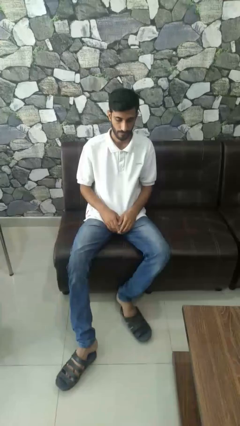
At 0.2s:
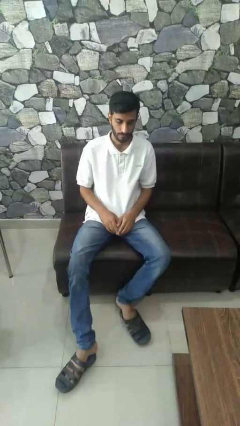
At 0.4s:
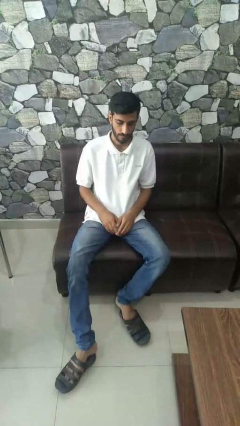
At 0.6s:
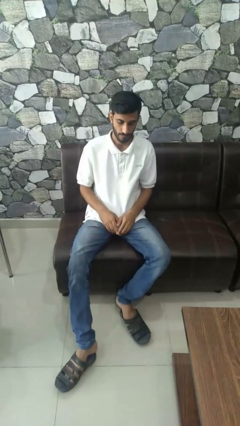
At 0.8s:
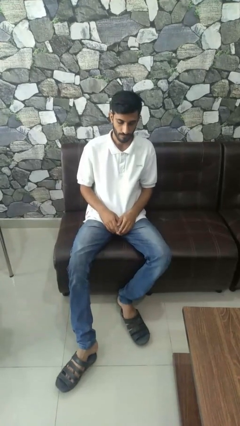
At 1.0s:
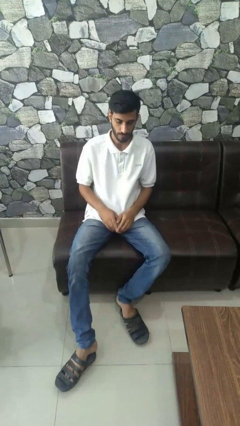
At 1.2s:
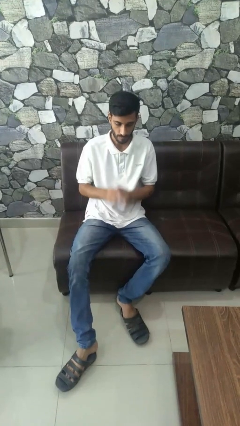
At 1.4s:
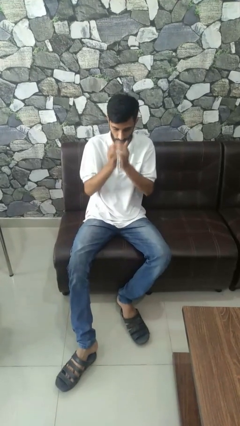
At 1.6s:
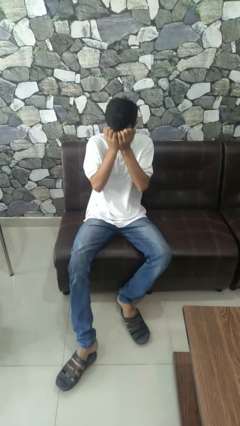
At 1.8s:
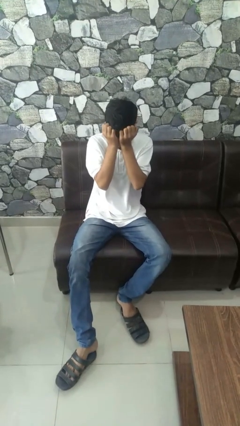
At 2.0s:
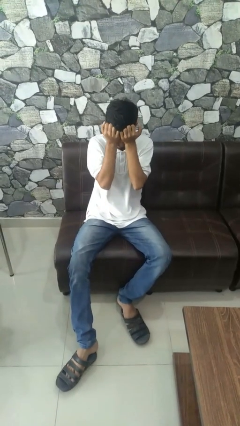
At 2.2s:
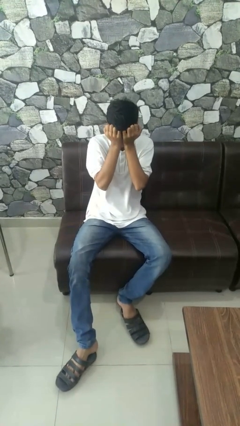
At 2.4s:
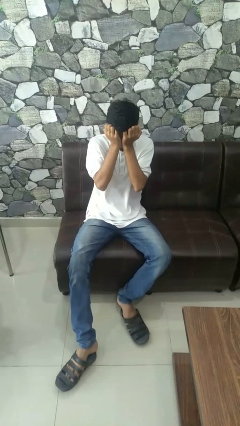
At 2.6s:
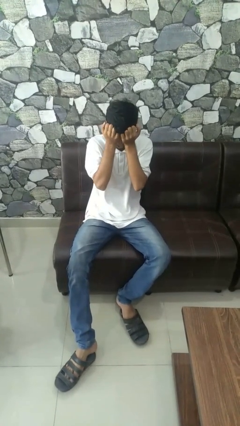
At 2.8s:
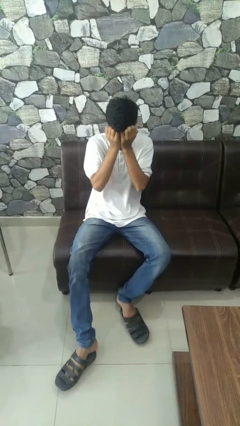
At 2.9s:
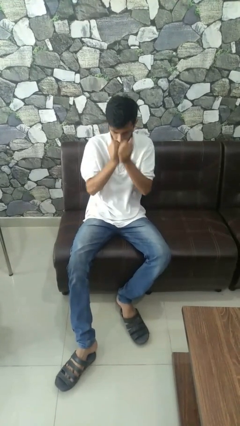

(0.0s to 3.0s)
person rubs eyes

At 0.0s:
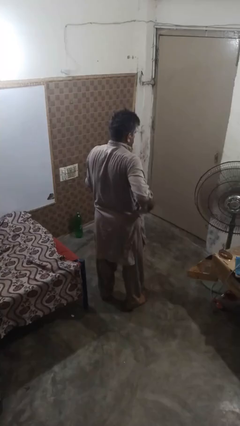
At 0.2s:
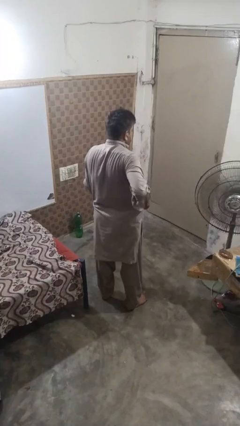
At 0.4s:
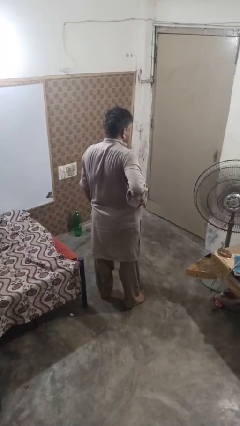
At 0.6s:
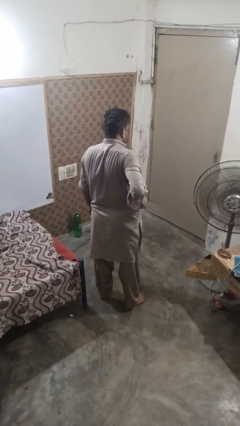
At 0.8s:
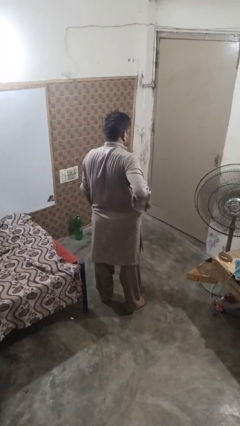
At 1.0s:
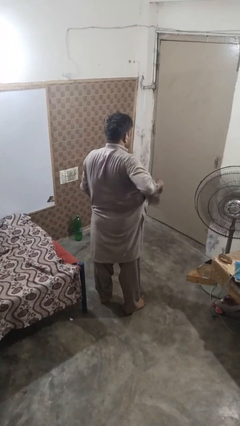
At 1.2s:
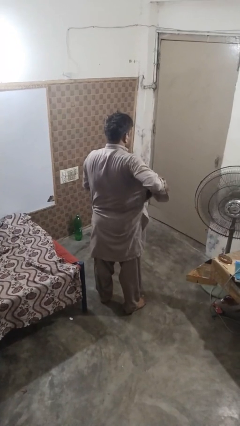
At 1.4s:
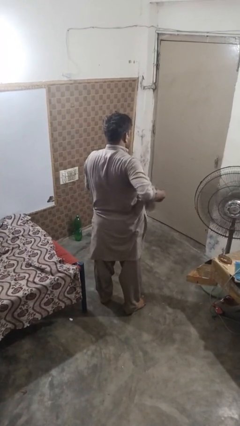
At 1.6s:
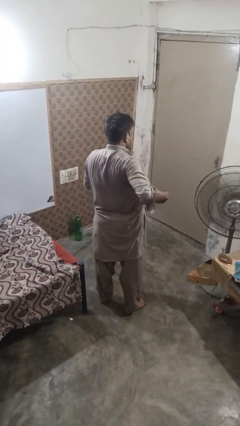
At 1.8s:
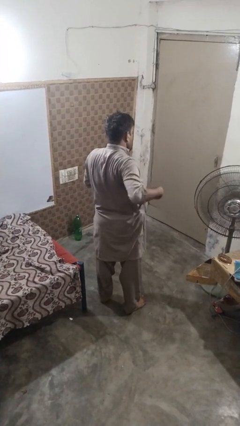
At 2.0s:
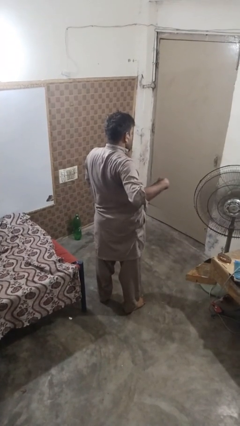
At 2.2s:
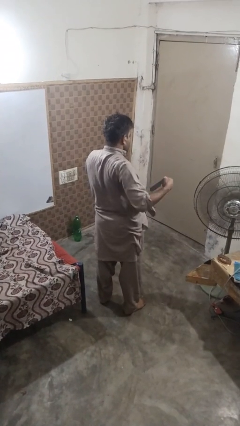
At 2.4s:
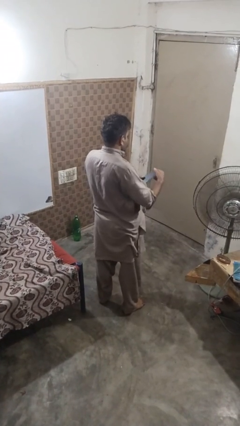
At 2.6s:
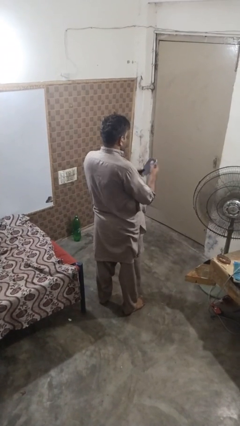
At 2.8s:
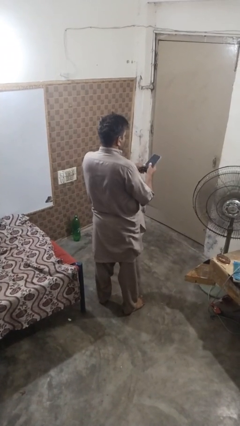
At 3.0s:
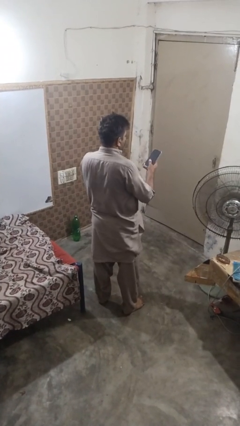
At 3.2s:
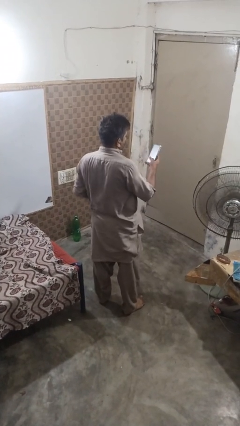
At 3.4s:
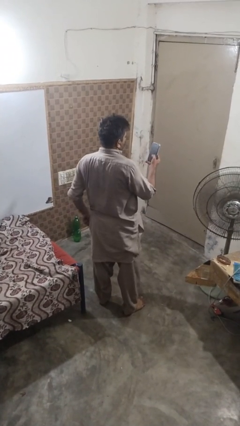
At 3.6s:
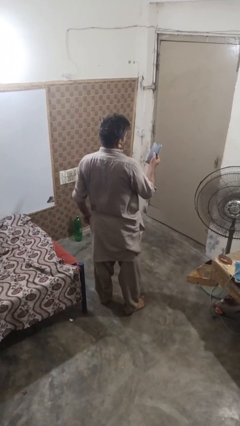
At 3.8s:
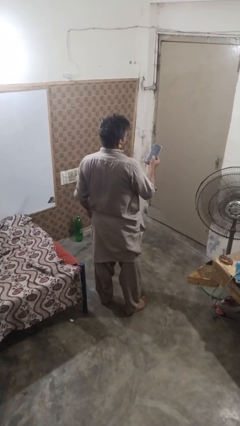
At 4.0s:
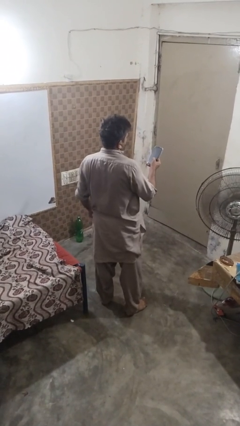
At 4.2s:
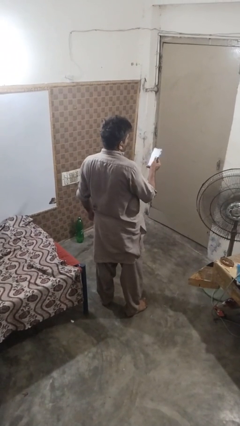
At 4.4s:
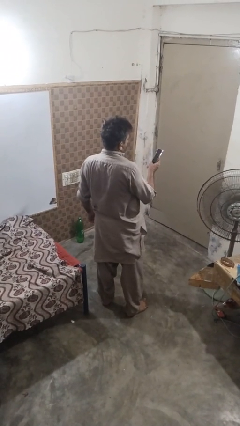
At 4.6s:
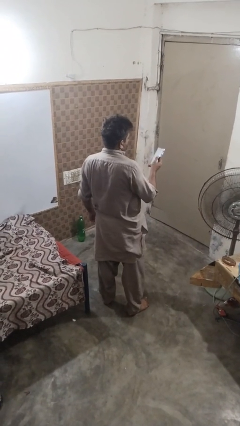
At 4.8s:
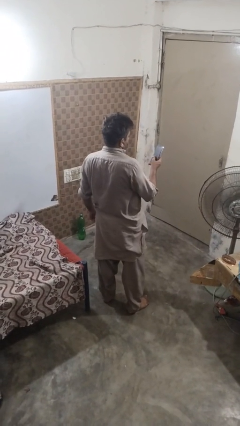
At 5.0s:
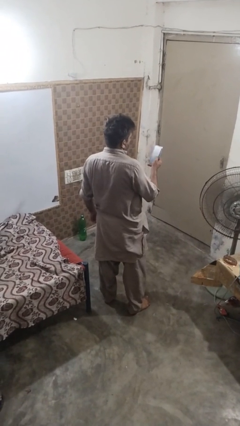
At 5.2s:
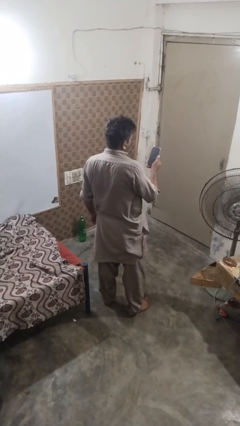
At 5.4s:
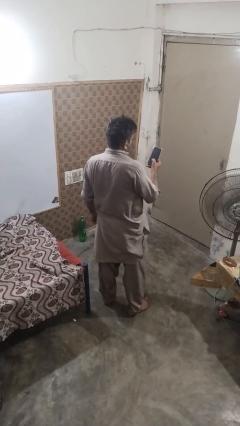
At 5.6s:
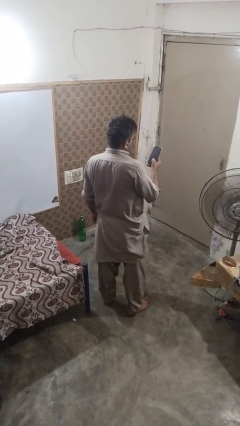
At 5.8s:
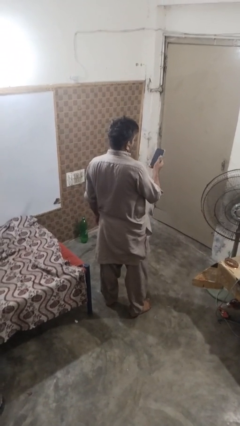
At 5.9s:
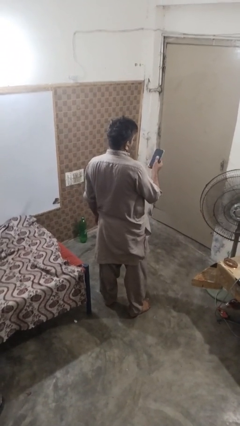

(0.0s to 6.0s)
person takes phone from pocket

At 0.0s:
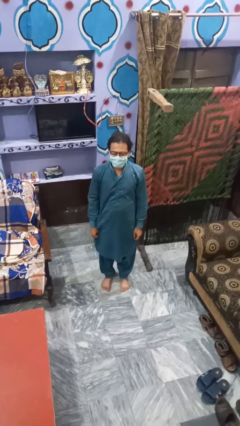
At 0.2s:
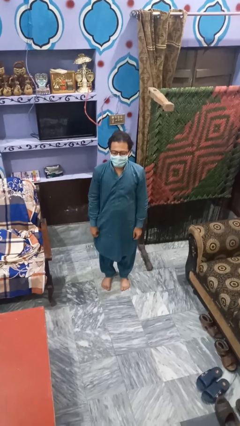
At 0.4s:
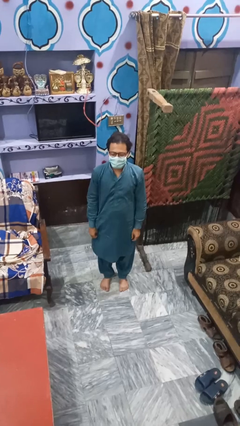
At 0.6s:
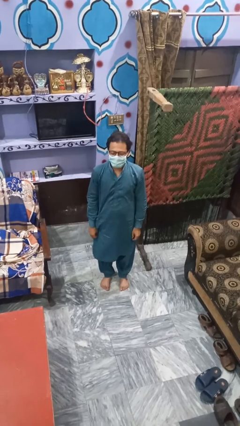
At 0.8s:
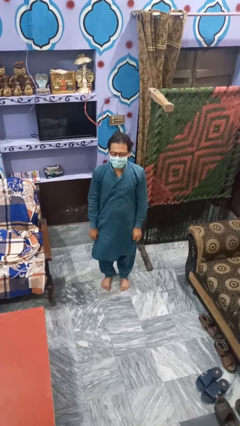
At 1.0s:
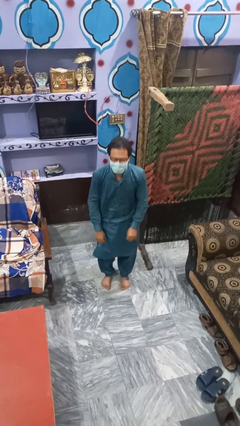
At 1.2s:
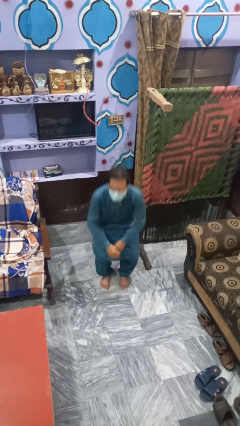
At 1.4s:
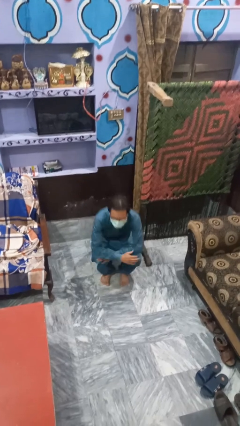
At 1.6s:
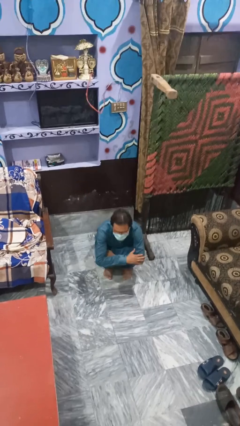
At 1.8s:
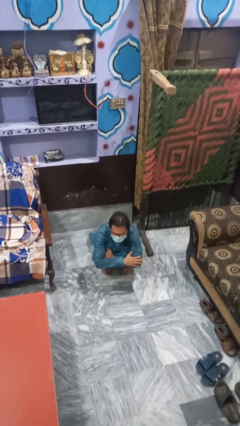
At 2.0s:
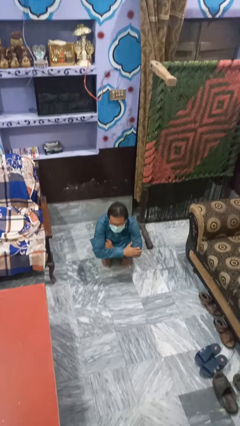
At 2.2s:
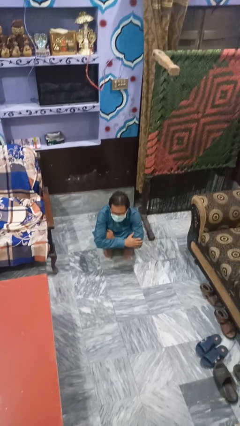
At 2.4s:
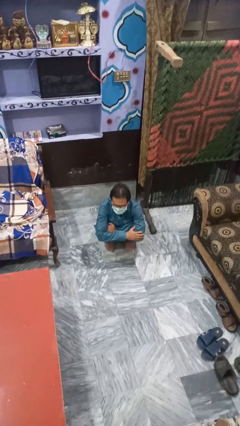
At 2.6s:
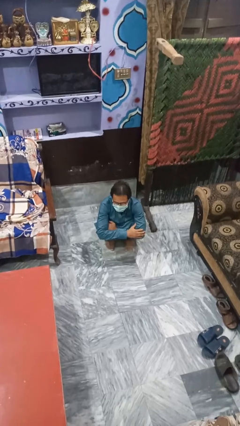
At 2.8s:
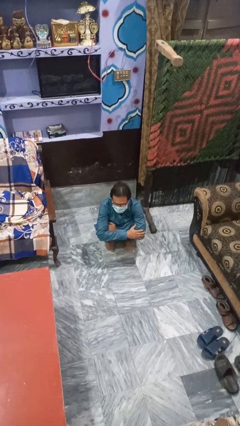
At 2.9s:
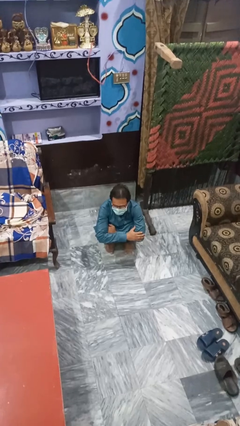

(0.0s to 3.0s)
person squats

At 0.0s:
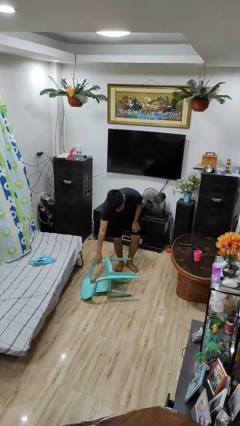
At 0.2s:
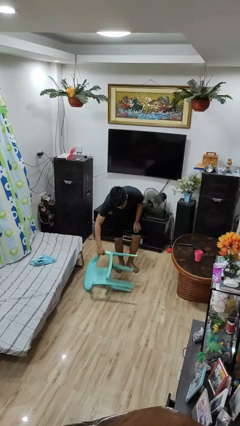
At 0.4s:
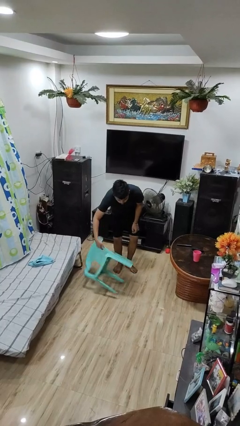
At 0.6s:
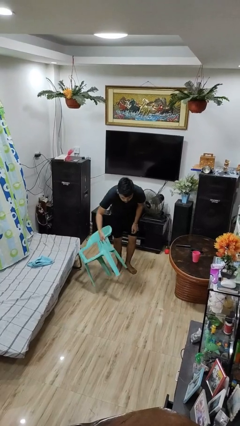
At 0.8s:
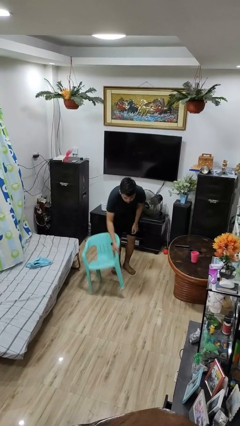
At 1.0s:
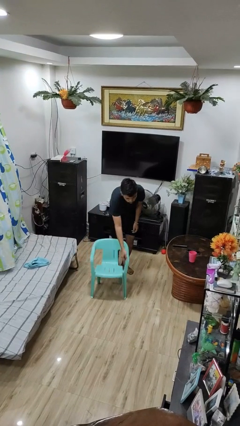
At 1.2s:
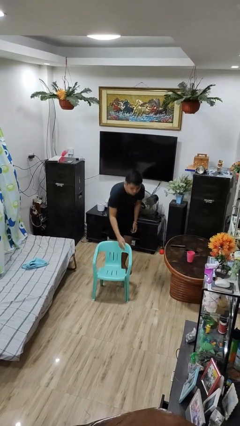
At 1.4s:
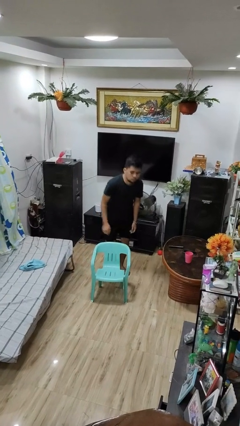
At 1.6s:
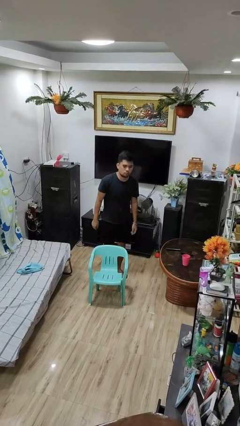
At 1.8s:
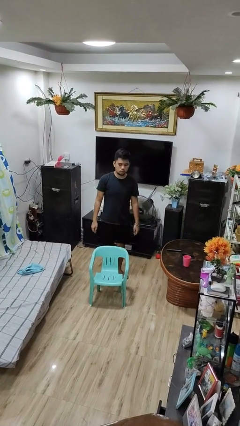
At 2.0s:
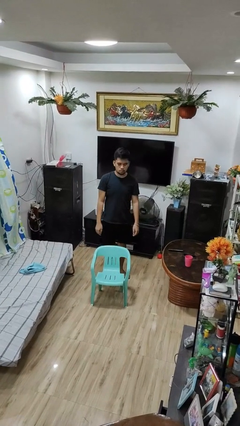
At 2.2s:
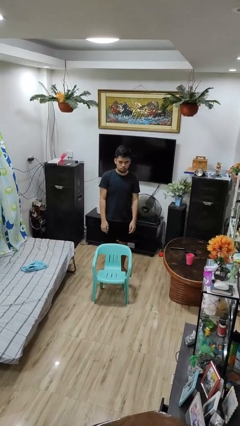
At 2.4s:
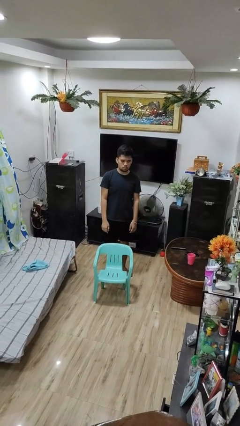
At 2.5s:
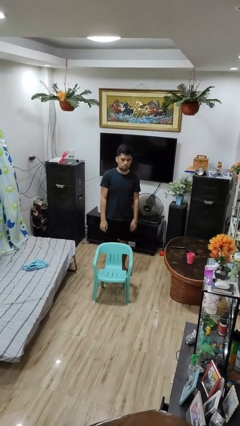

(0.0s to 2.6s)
person sets upright furniture

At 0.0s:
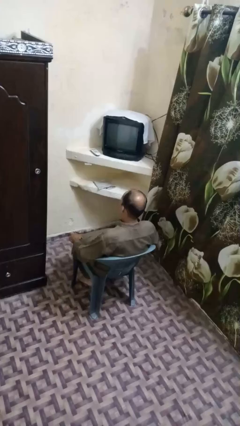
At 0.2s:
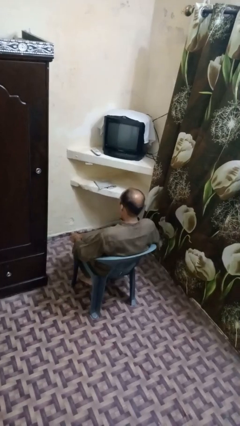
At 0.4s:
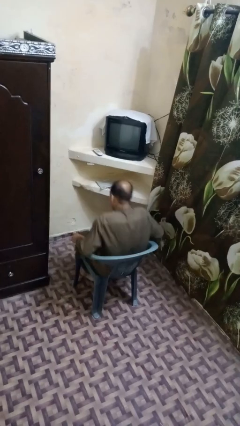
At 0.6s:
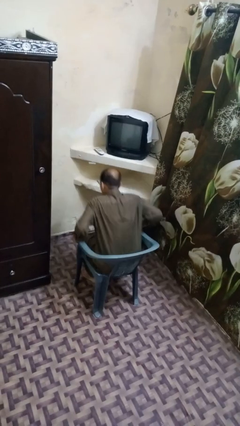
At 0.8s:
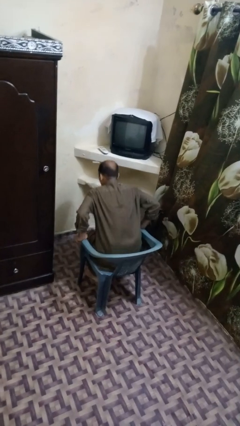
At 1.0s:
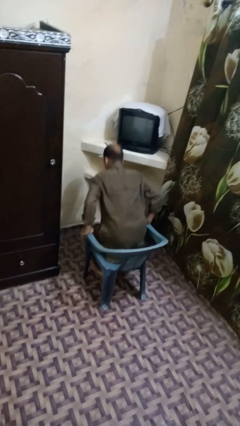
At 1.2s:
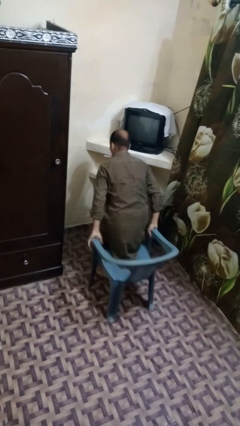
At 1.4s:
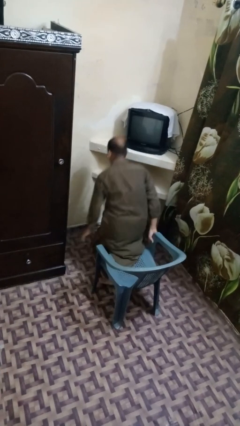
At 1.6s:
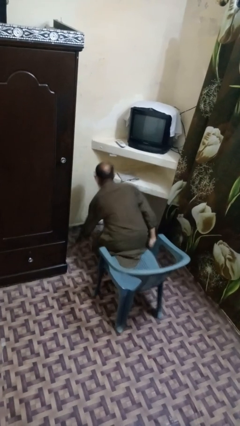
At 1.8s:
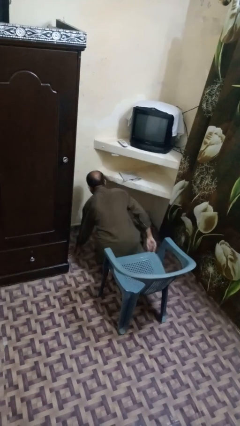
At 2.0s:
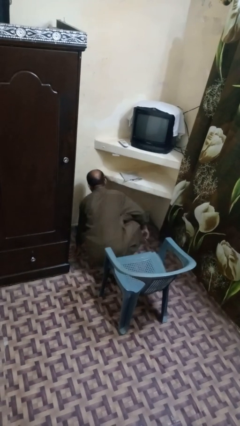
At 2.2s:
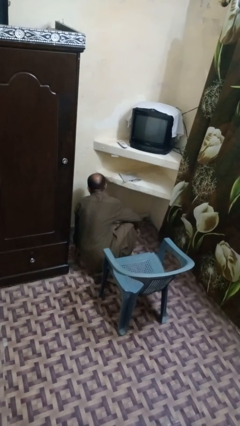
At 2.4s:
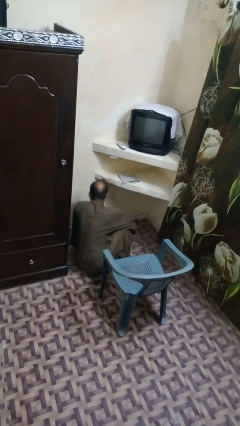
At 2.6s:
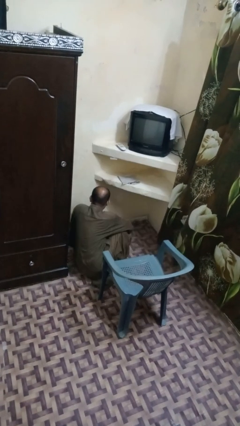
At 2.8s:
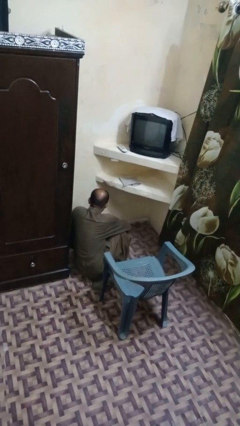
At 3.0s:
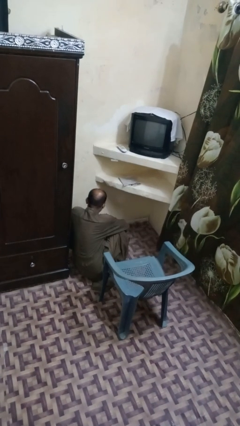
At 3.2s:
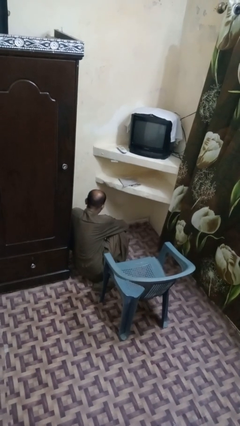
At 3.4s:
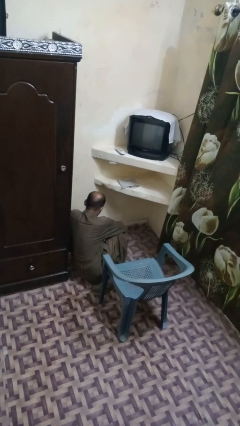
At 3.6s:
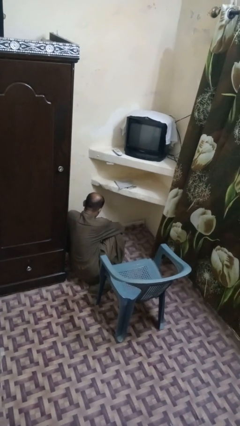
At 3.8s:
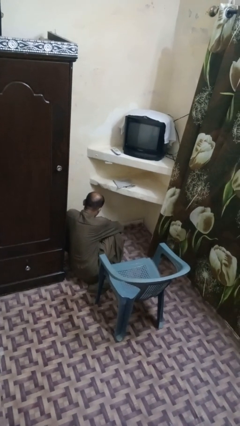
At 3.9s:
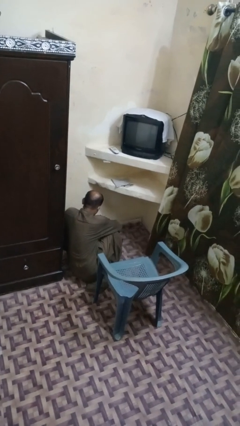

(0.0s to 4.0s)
person falls from chair
